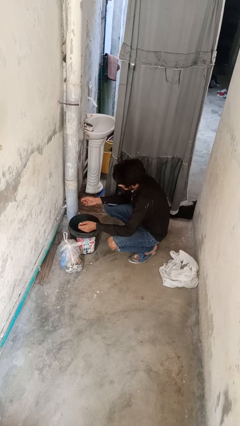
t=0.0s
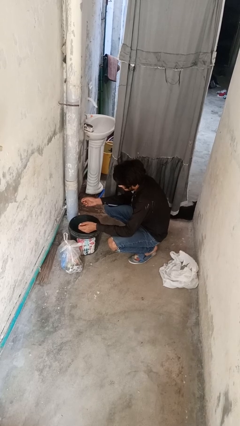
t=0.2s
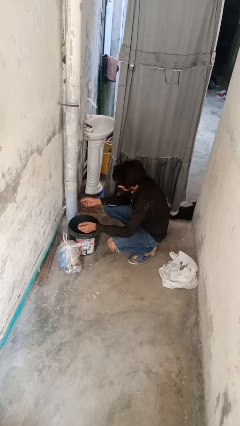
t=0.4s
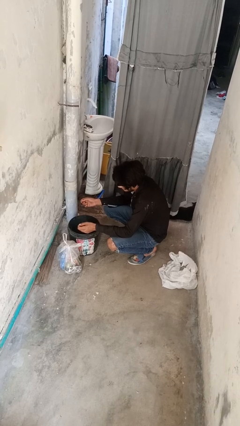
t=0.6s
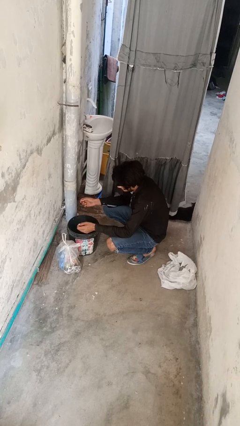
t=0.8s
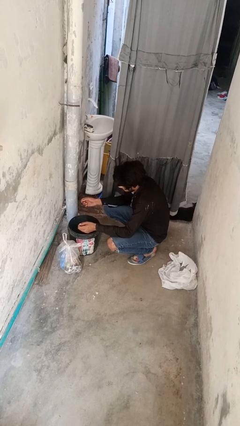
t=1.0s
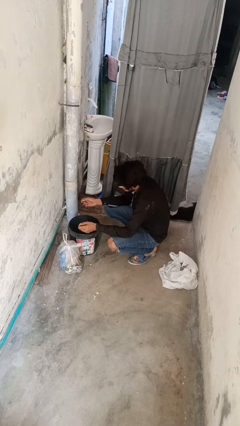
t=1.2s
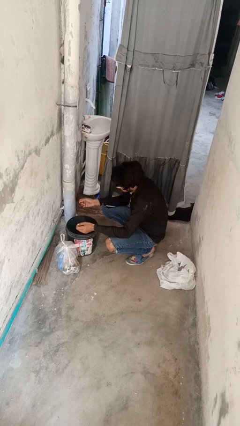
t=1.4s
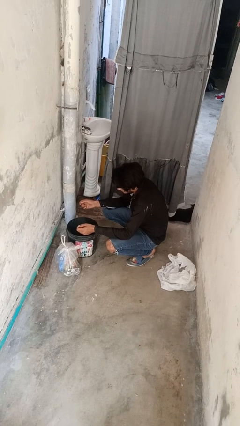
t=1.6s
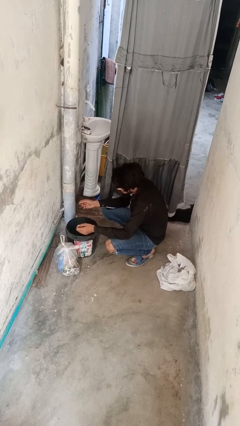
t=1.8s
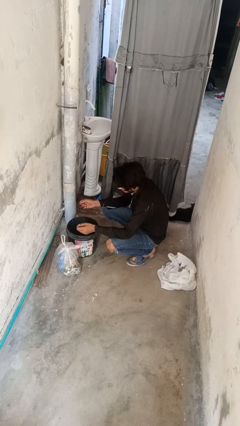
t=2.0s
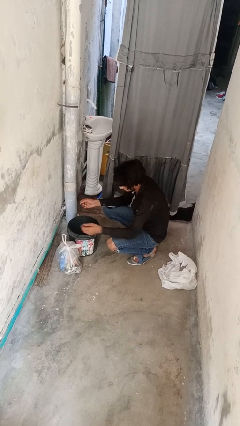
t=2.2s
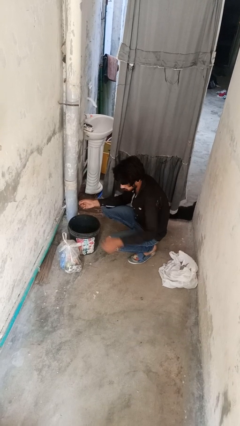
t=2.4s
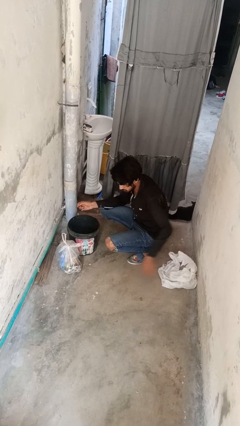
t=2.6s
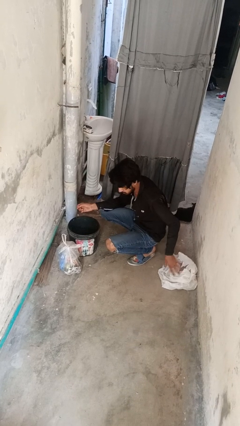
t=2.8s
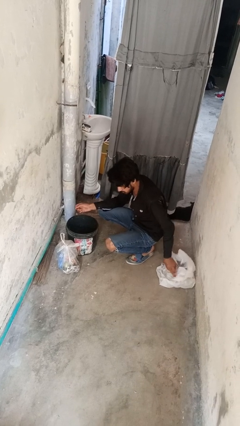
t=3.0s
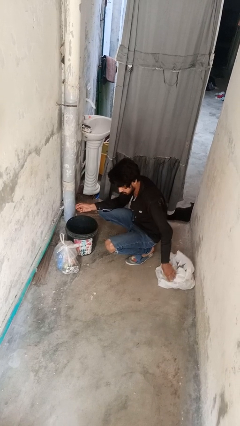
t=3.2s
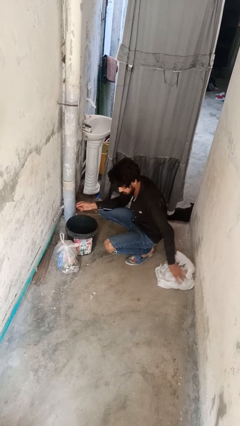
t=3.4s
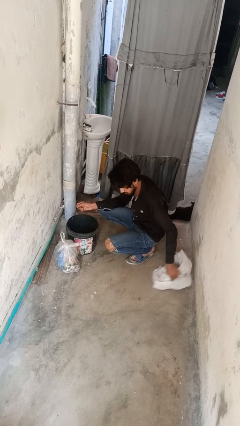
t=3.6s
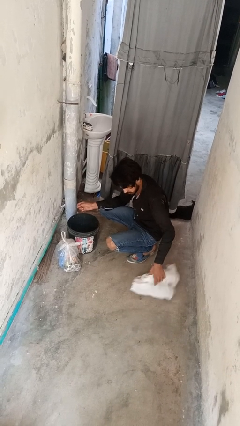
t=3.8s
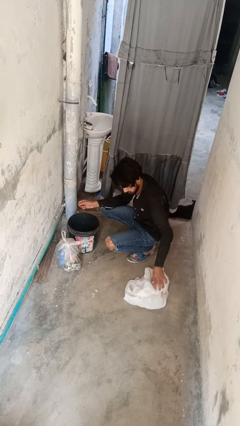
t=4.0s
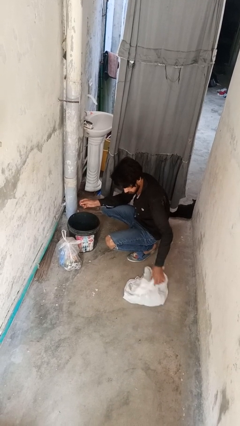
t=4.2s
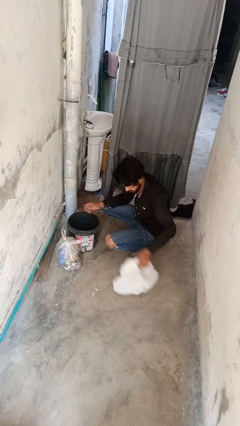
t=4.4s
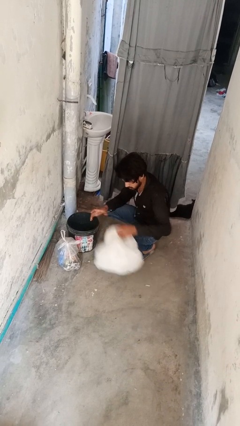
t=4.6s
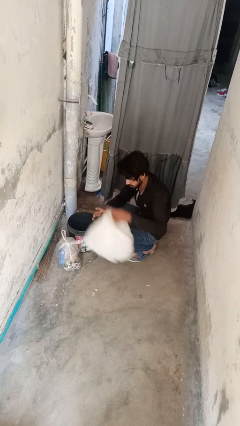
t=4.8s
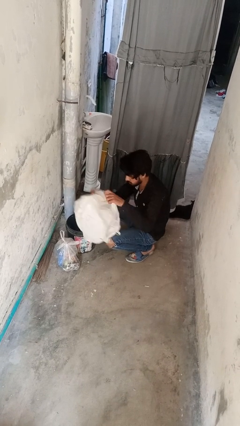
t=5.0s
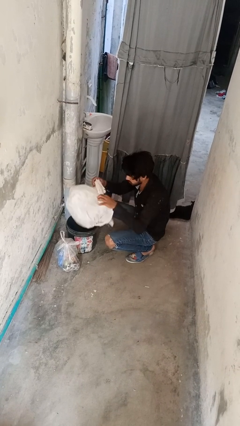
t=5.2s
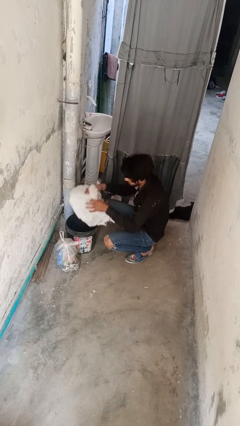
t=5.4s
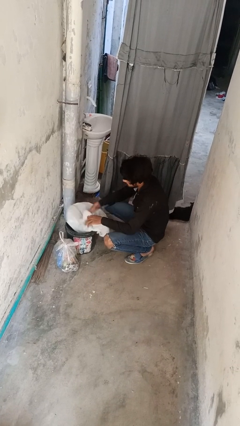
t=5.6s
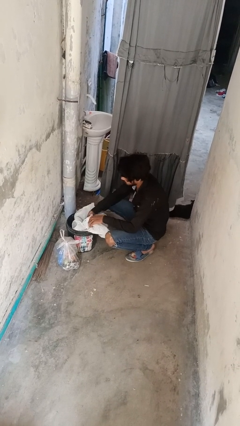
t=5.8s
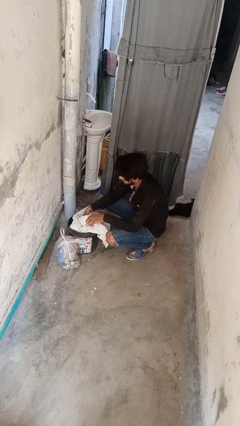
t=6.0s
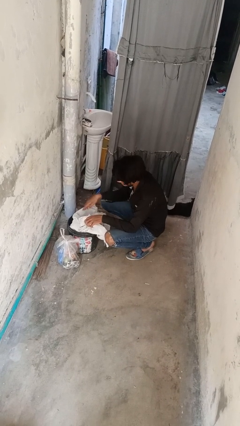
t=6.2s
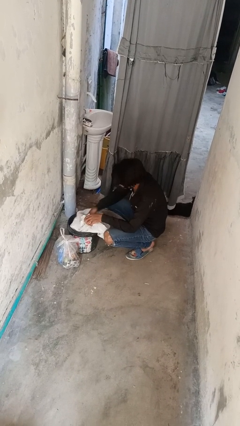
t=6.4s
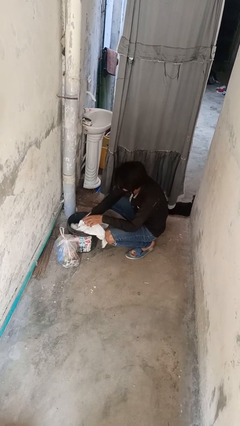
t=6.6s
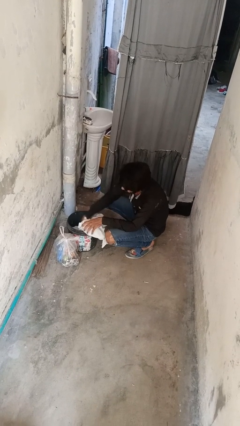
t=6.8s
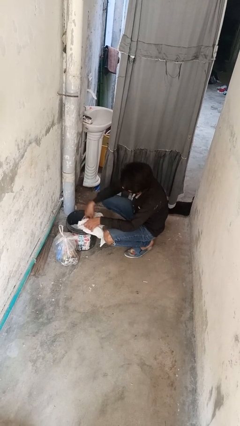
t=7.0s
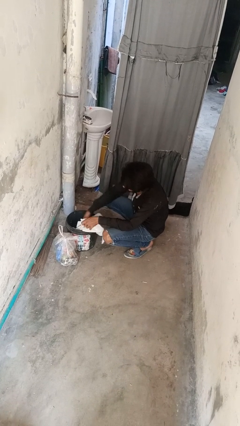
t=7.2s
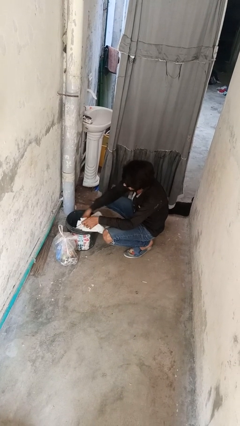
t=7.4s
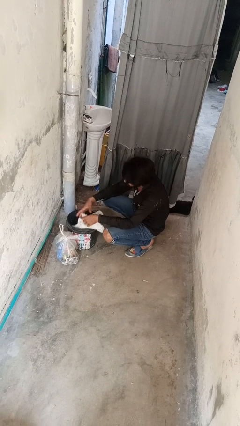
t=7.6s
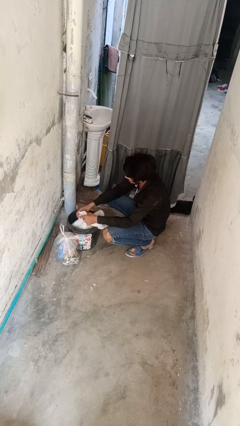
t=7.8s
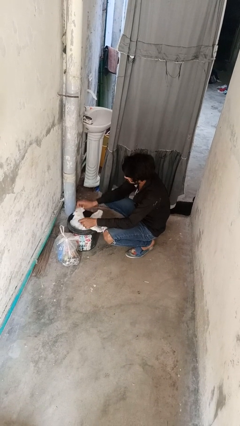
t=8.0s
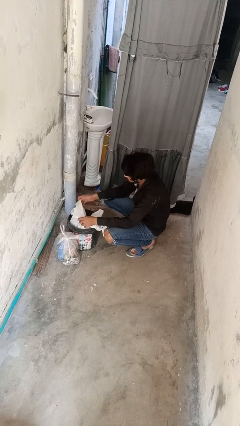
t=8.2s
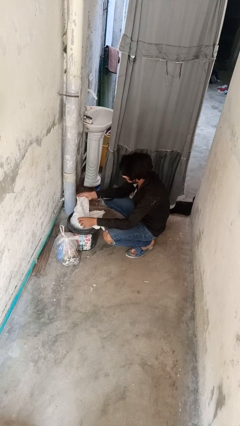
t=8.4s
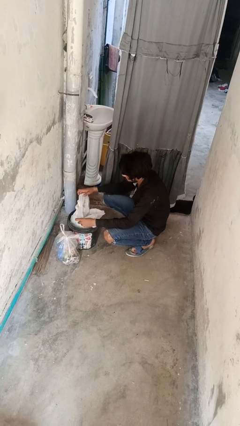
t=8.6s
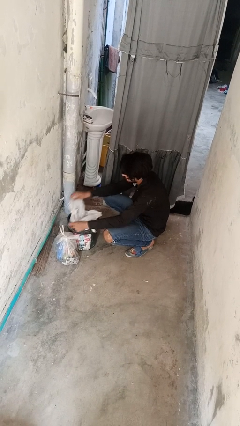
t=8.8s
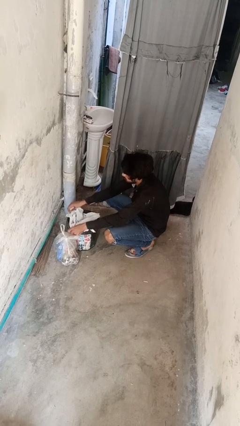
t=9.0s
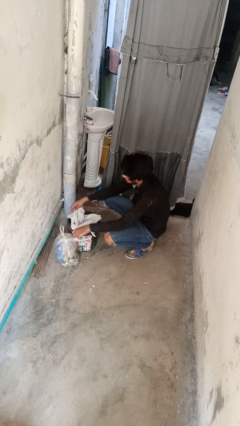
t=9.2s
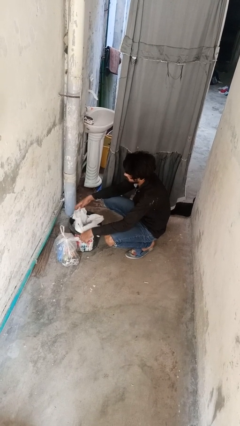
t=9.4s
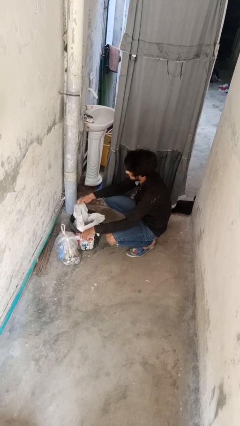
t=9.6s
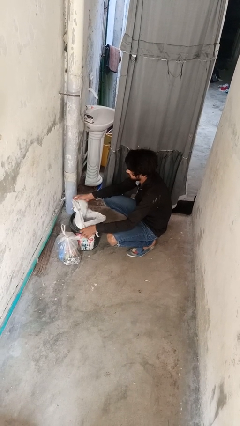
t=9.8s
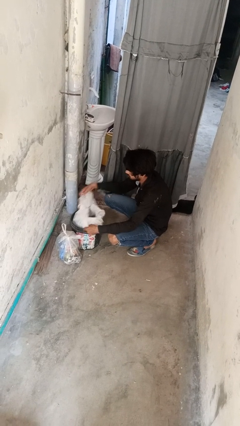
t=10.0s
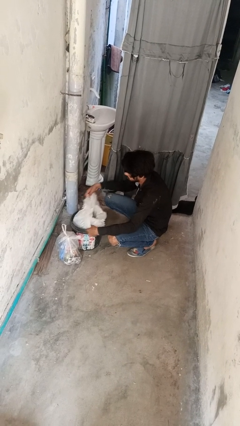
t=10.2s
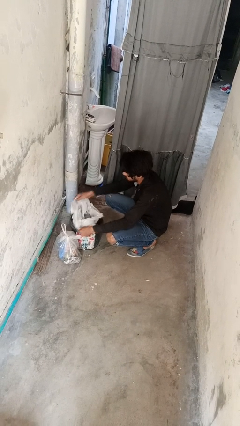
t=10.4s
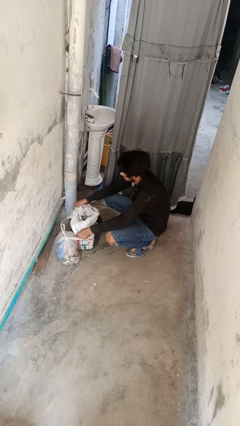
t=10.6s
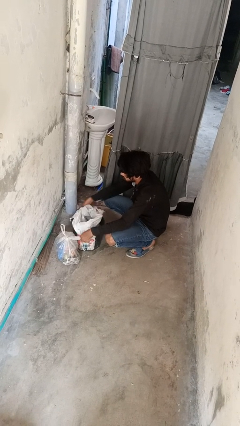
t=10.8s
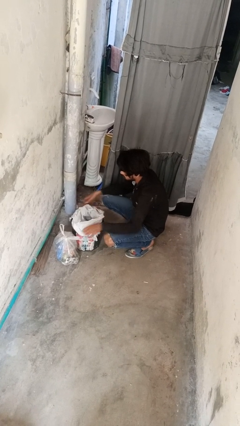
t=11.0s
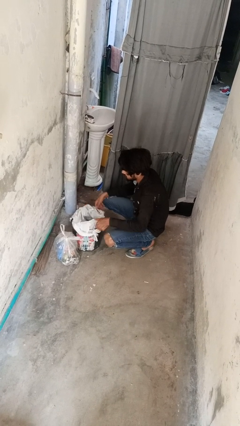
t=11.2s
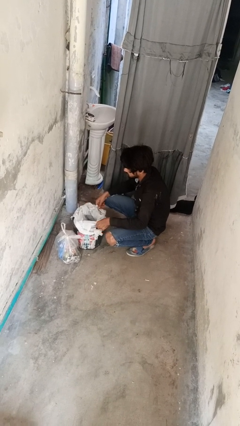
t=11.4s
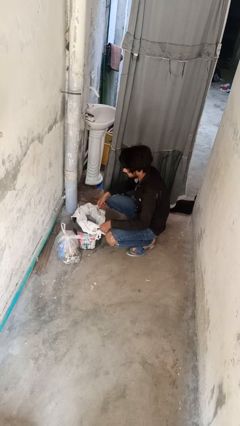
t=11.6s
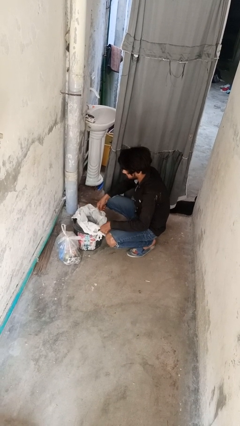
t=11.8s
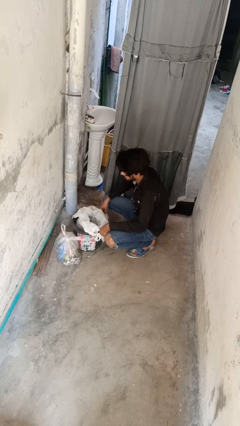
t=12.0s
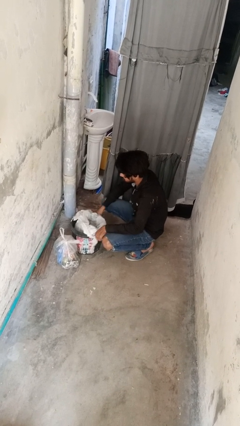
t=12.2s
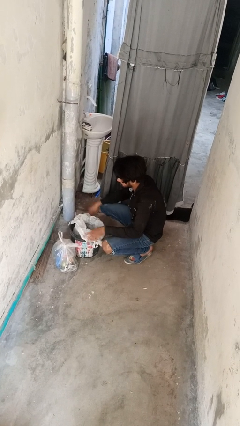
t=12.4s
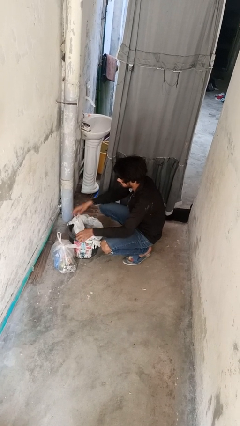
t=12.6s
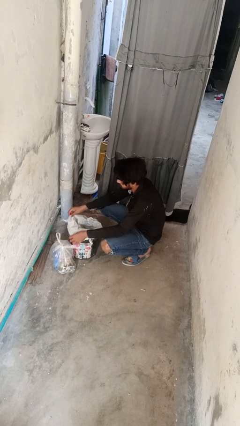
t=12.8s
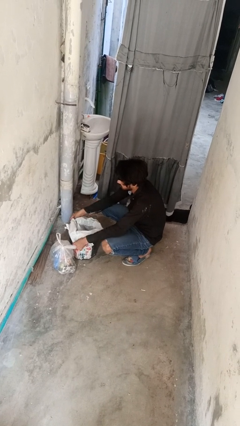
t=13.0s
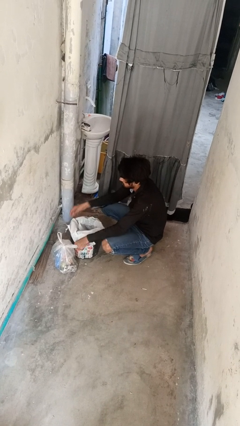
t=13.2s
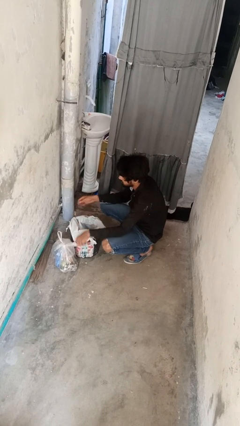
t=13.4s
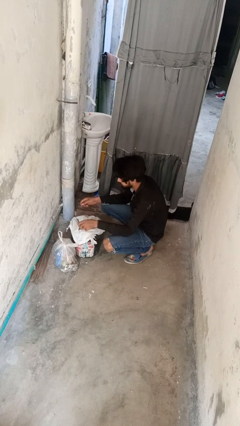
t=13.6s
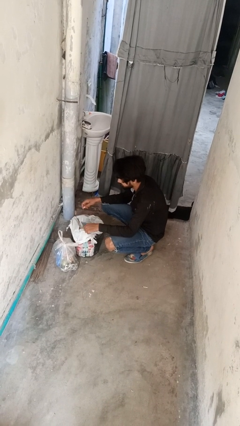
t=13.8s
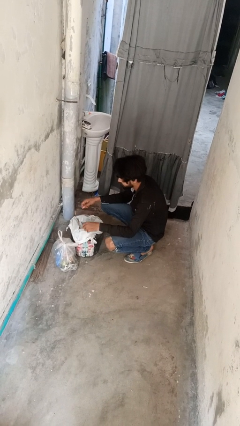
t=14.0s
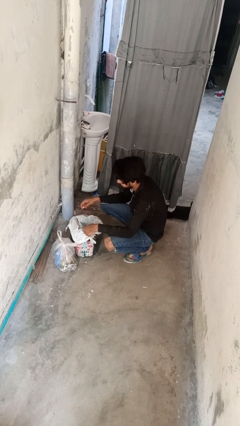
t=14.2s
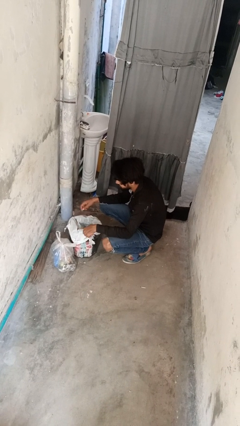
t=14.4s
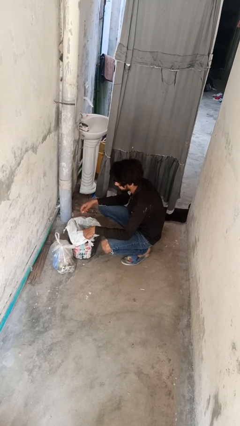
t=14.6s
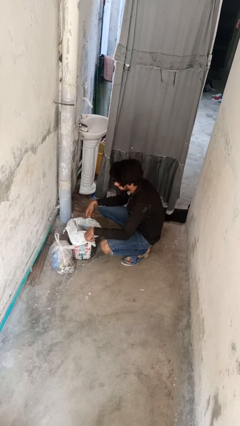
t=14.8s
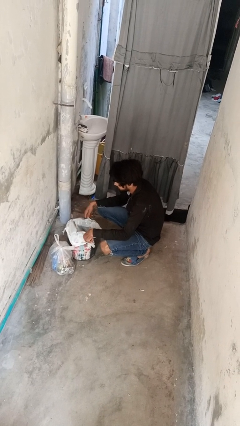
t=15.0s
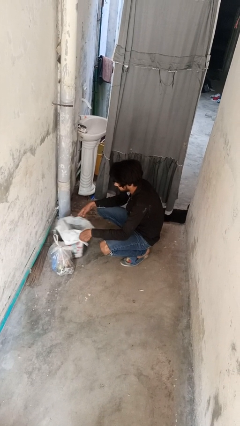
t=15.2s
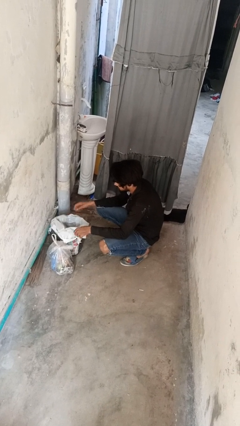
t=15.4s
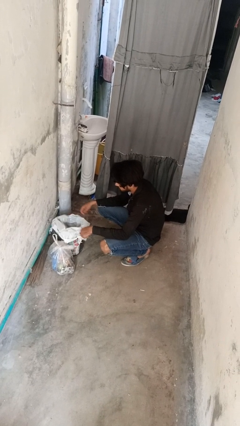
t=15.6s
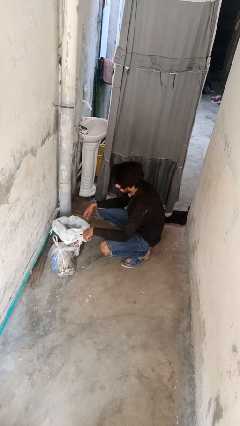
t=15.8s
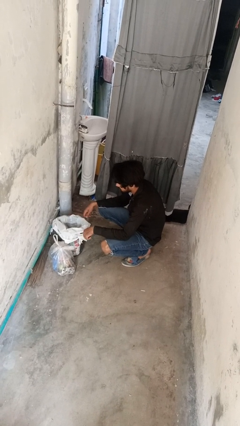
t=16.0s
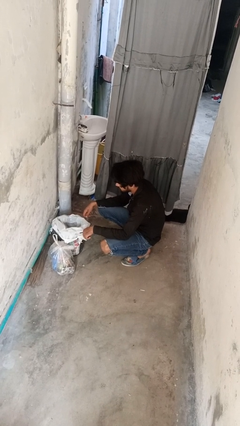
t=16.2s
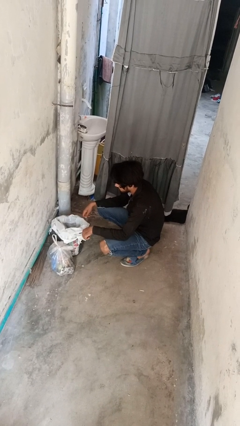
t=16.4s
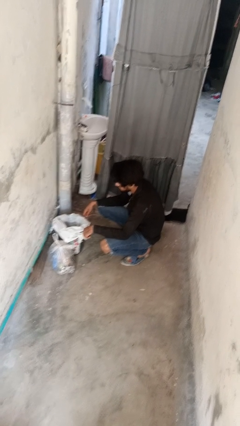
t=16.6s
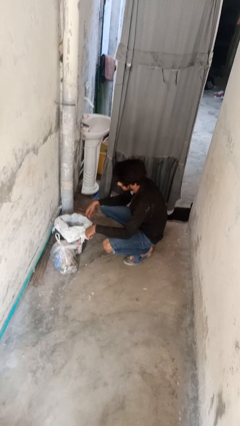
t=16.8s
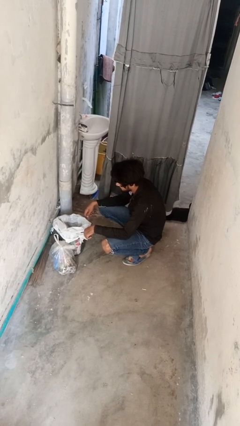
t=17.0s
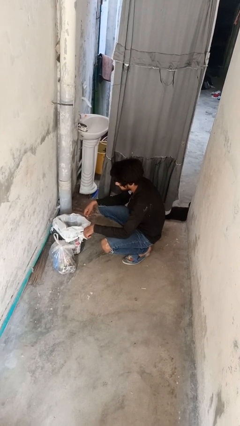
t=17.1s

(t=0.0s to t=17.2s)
person inserts trashbag into trashcan

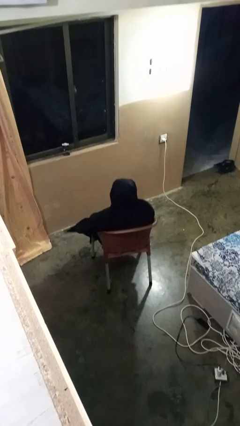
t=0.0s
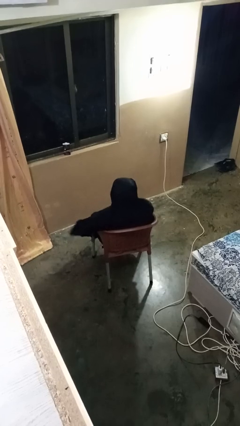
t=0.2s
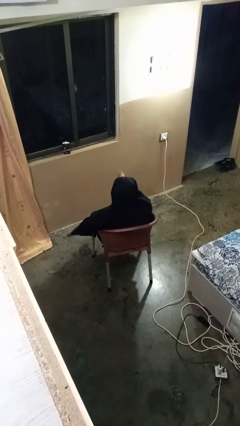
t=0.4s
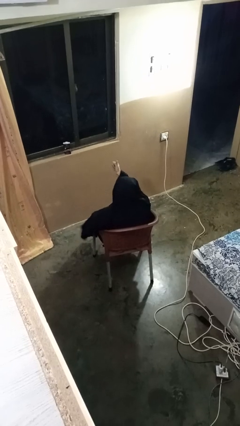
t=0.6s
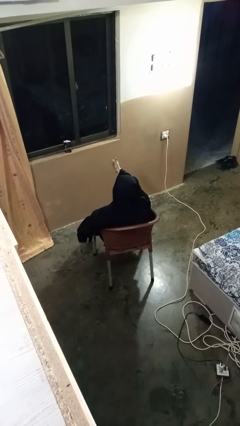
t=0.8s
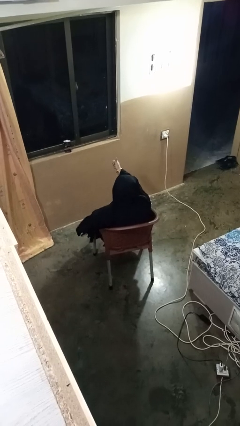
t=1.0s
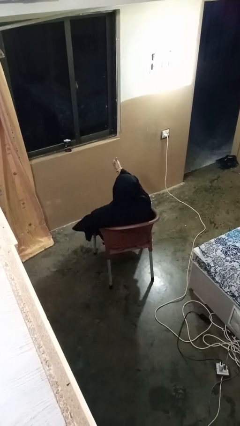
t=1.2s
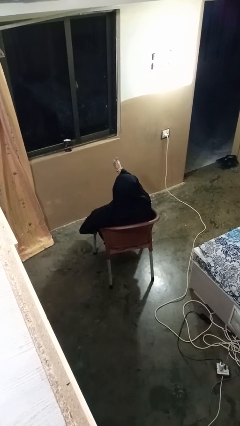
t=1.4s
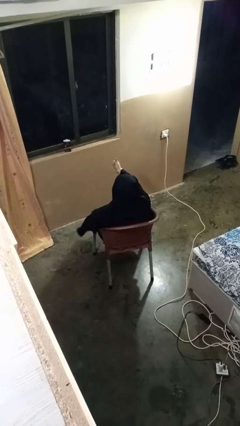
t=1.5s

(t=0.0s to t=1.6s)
person gestures thumbs up
